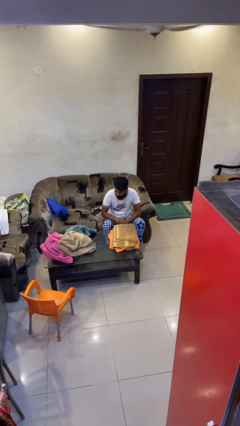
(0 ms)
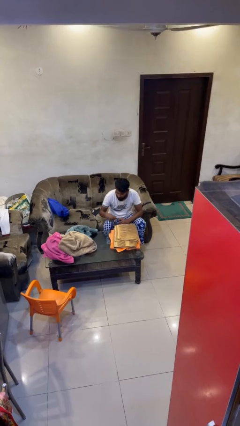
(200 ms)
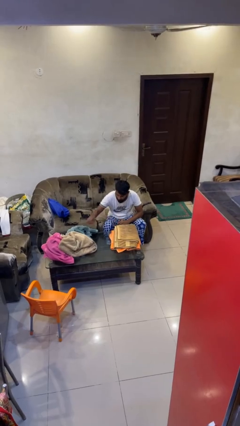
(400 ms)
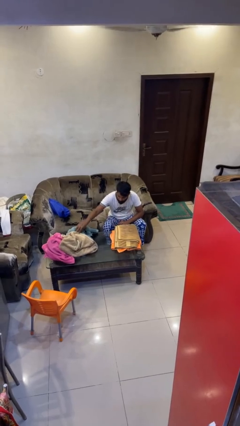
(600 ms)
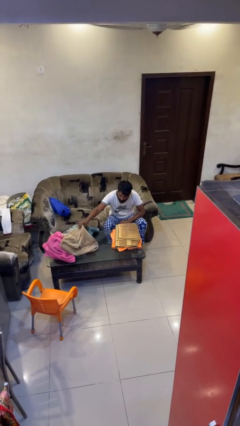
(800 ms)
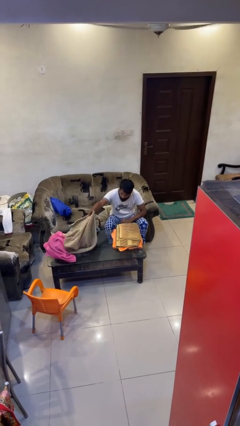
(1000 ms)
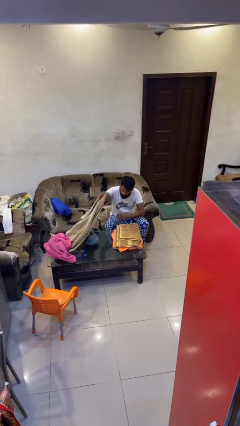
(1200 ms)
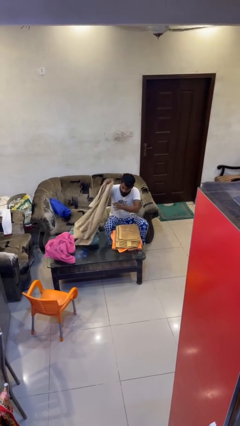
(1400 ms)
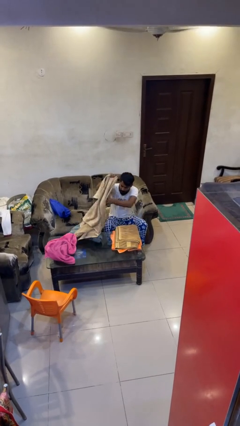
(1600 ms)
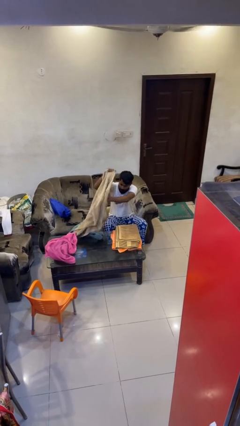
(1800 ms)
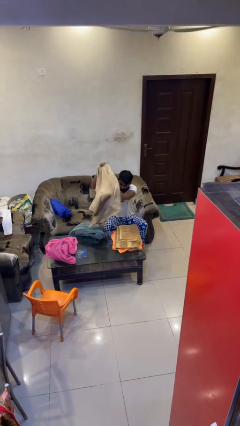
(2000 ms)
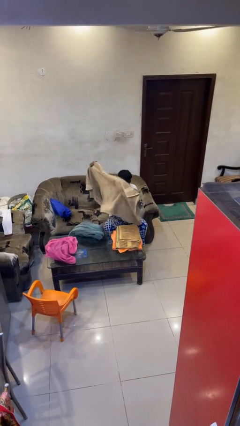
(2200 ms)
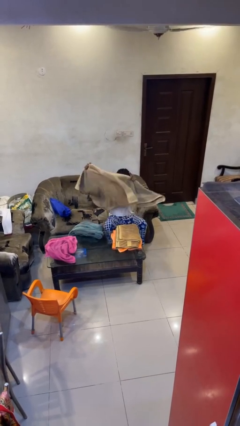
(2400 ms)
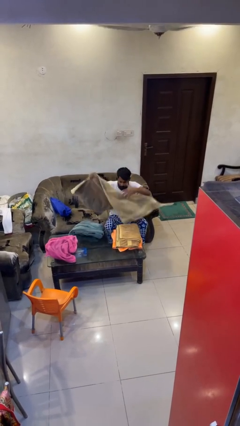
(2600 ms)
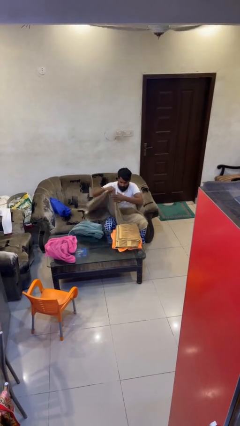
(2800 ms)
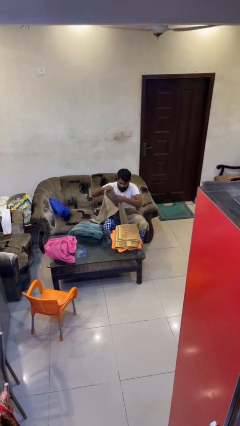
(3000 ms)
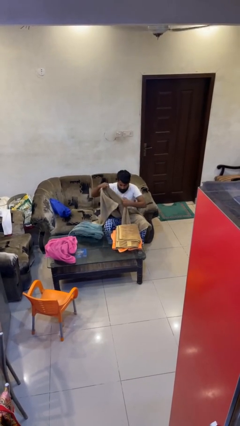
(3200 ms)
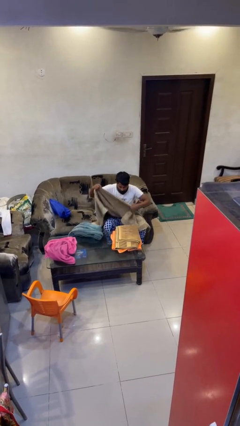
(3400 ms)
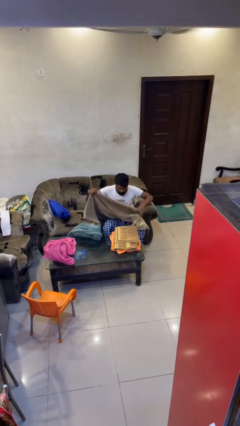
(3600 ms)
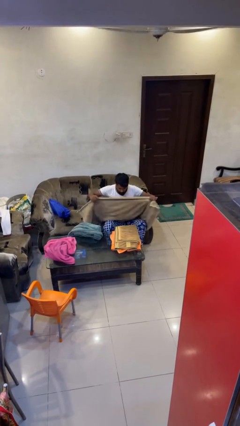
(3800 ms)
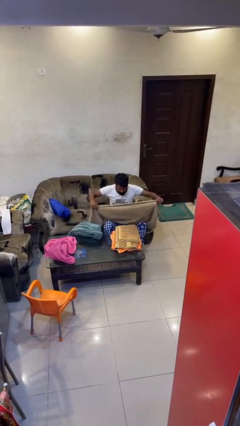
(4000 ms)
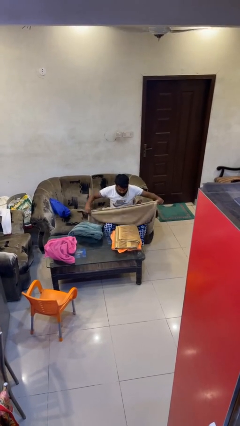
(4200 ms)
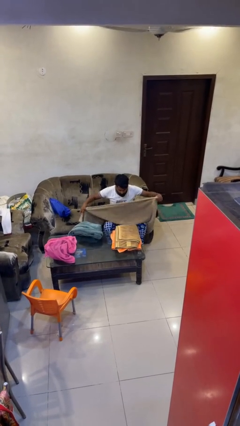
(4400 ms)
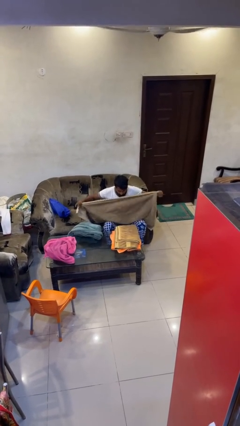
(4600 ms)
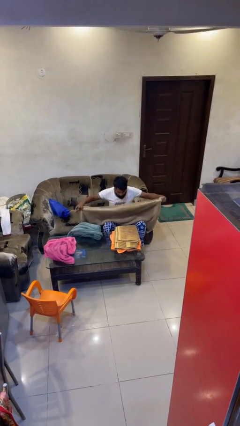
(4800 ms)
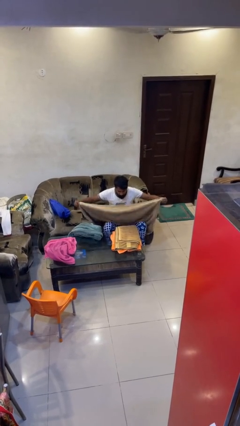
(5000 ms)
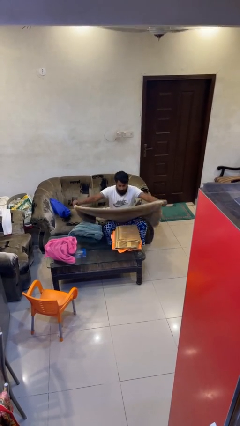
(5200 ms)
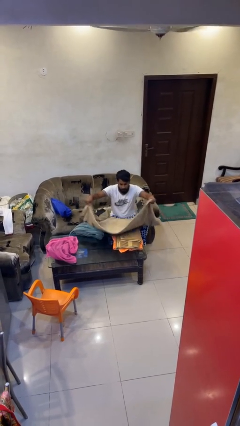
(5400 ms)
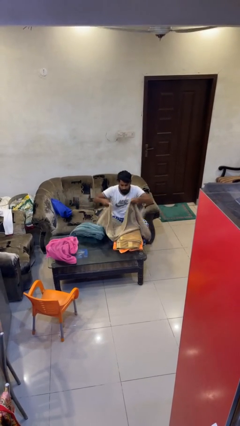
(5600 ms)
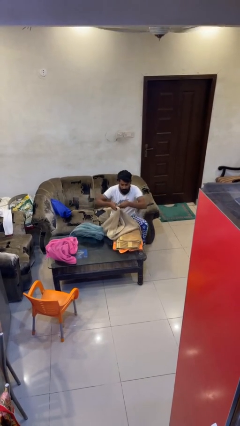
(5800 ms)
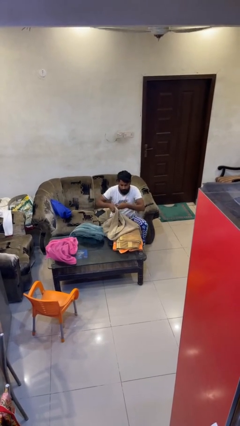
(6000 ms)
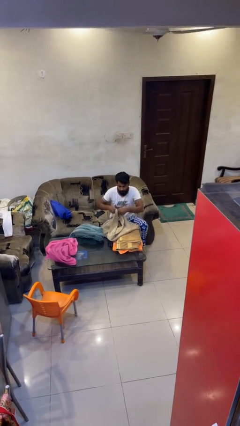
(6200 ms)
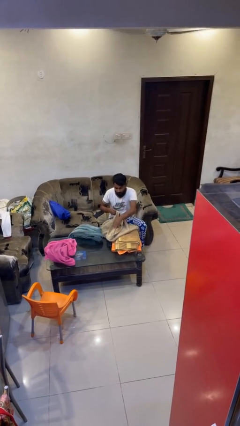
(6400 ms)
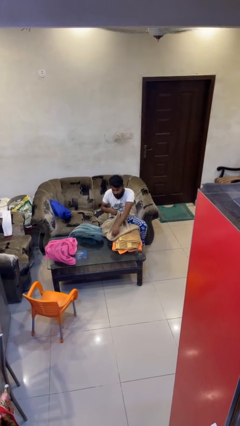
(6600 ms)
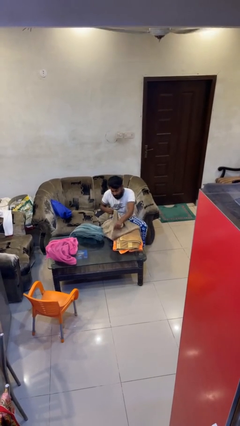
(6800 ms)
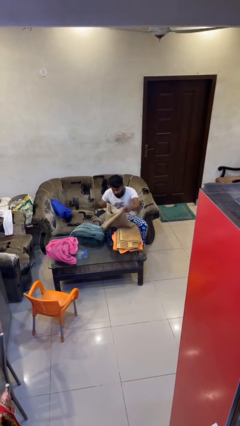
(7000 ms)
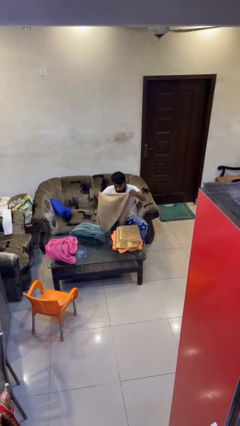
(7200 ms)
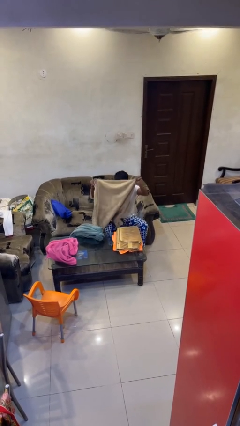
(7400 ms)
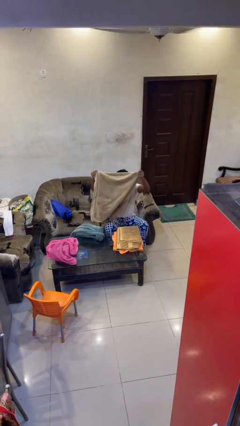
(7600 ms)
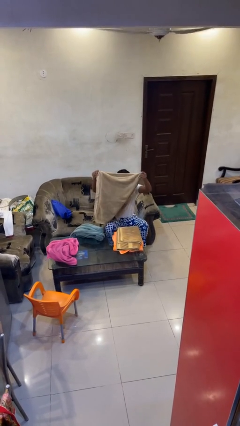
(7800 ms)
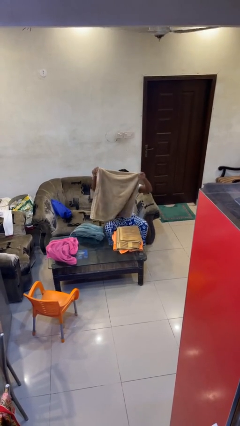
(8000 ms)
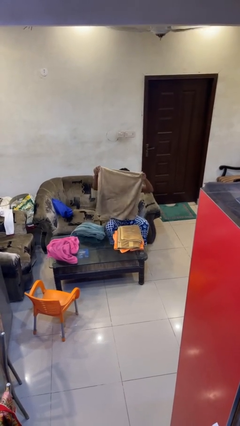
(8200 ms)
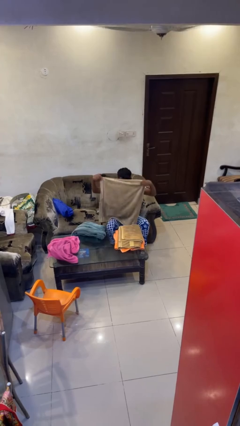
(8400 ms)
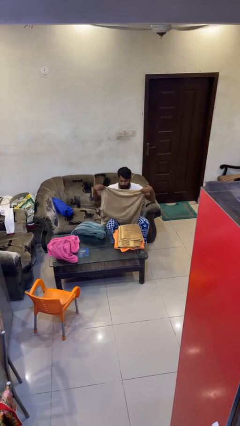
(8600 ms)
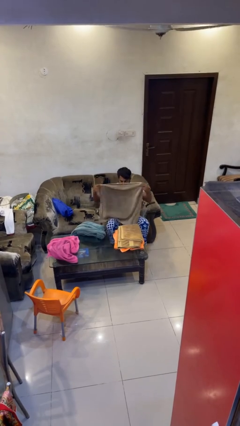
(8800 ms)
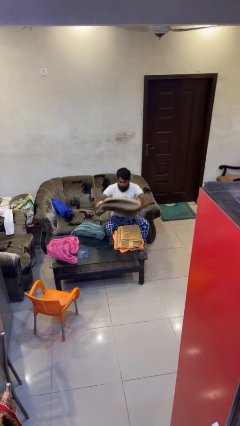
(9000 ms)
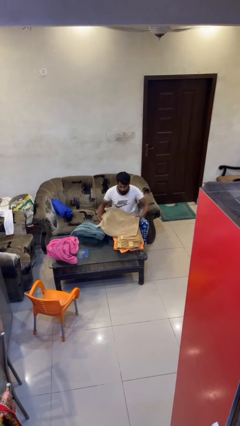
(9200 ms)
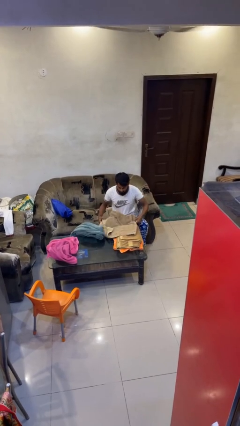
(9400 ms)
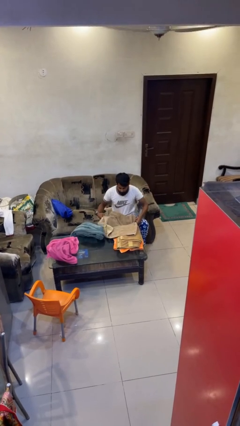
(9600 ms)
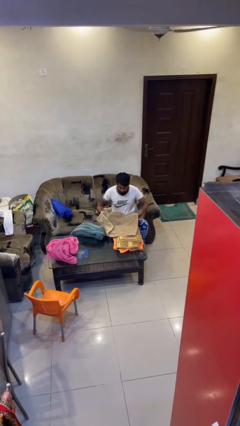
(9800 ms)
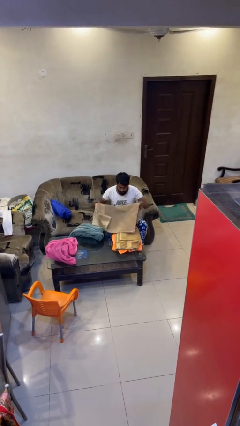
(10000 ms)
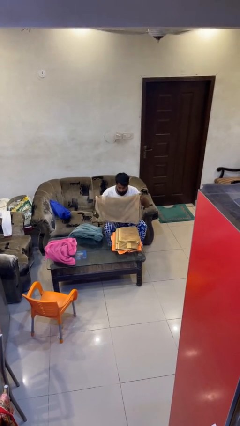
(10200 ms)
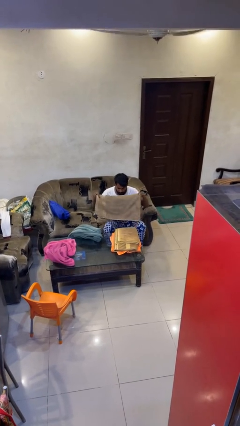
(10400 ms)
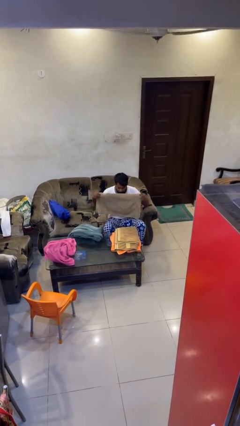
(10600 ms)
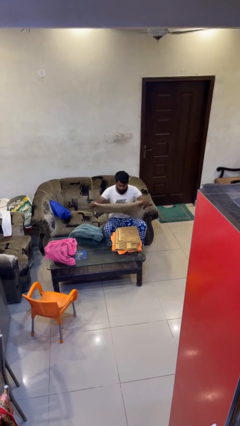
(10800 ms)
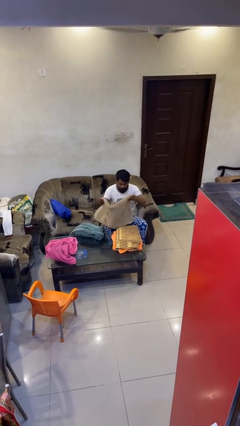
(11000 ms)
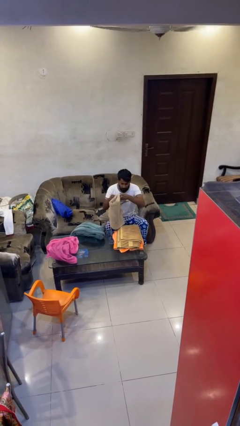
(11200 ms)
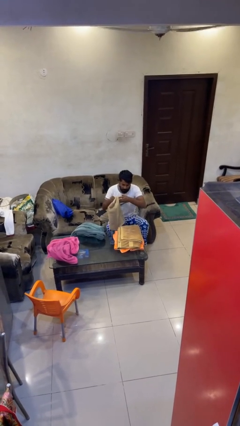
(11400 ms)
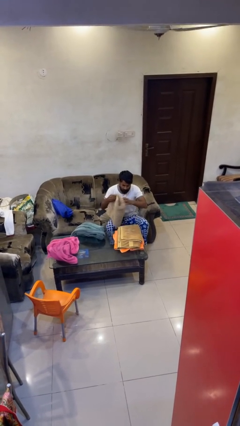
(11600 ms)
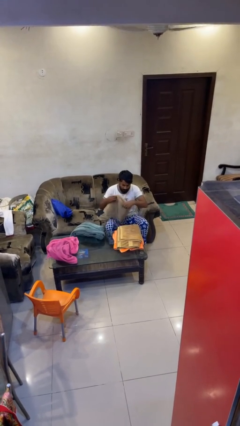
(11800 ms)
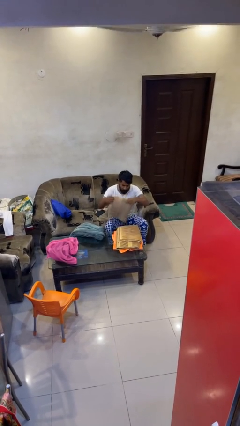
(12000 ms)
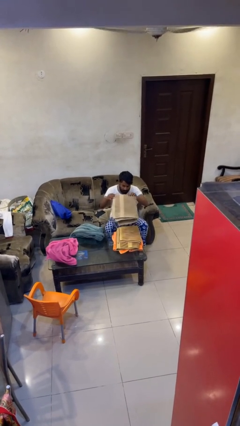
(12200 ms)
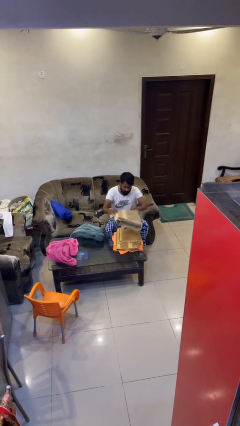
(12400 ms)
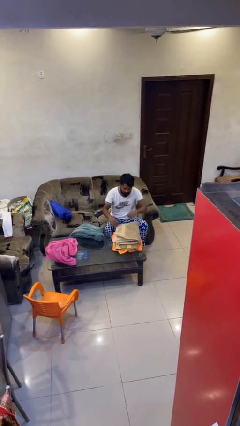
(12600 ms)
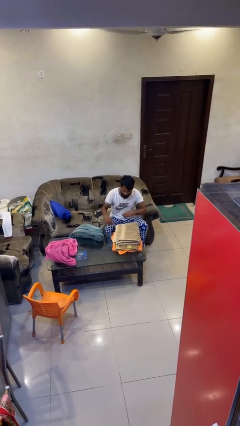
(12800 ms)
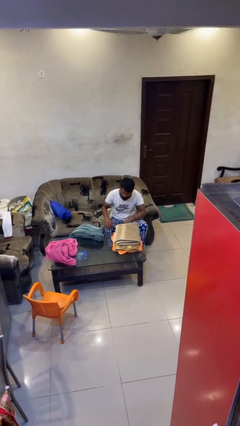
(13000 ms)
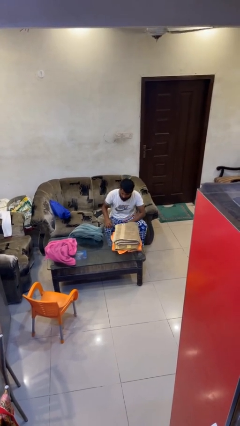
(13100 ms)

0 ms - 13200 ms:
person folds towel

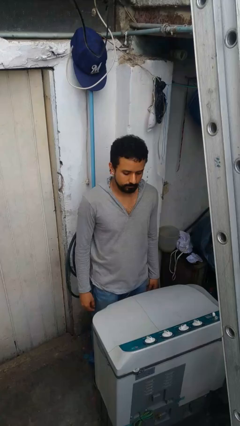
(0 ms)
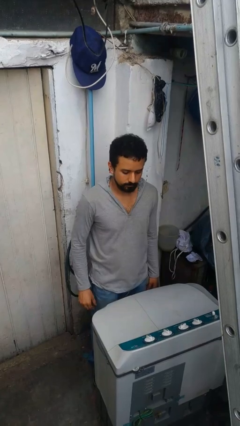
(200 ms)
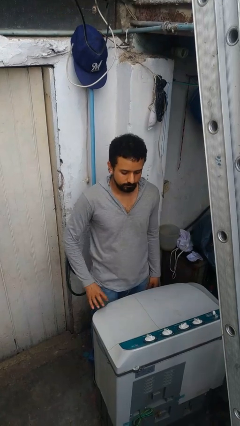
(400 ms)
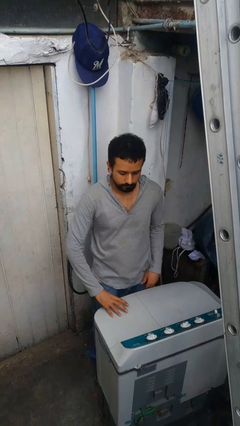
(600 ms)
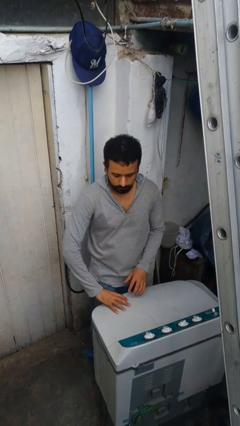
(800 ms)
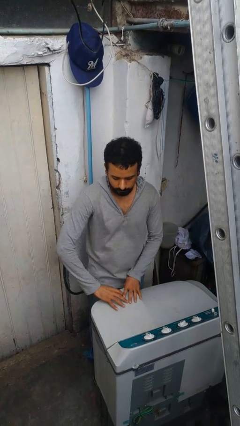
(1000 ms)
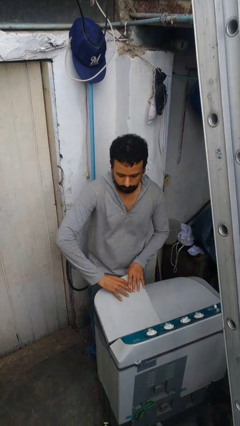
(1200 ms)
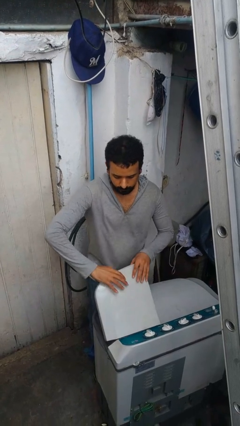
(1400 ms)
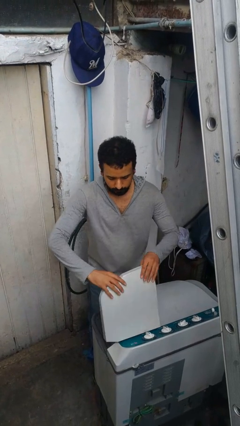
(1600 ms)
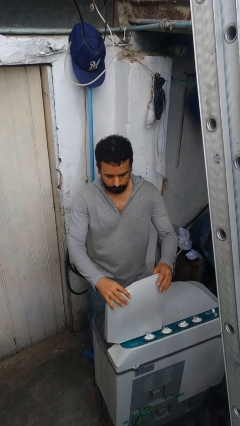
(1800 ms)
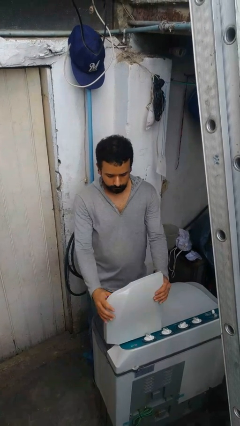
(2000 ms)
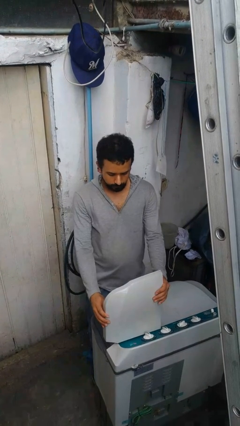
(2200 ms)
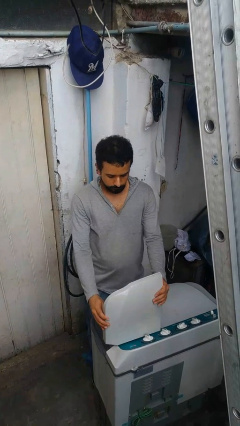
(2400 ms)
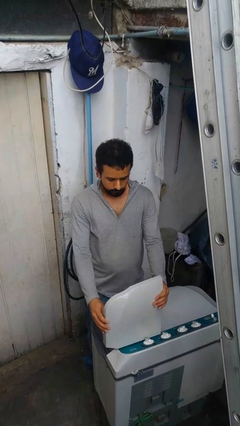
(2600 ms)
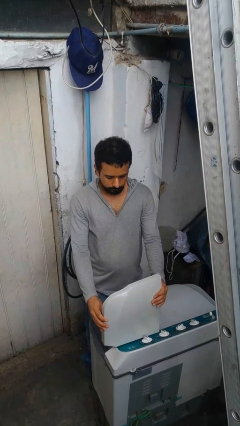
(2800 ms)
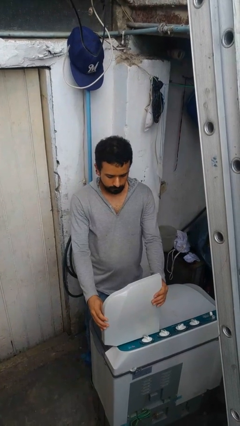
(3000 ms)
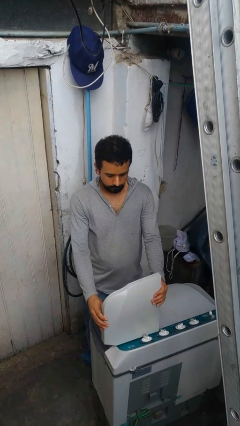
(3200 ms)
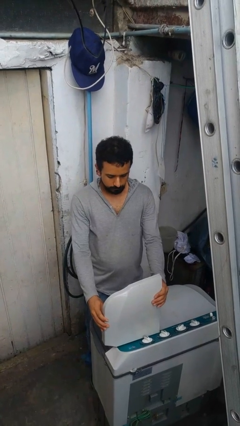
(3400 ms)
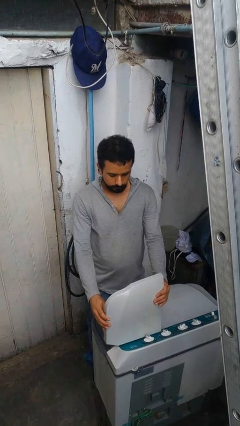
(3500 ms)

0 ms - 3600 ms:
person opens clothes washer

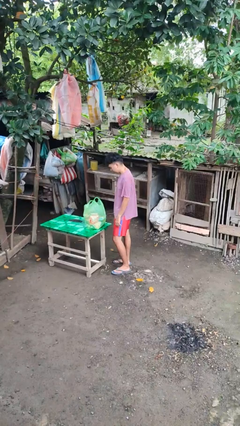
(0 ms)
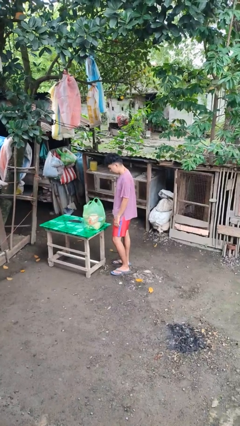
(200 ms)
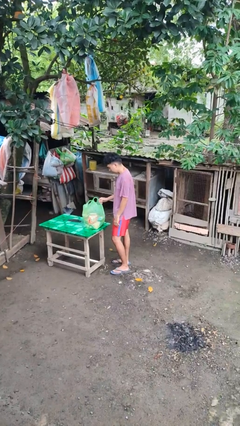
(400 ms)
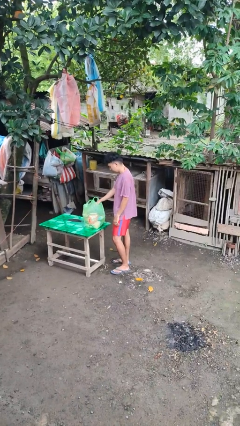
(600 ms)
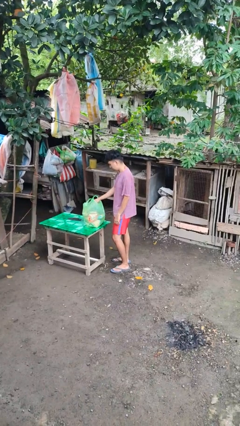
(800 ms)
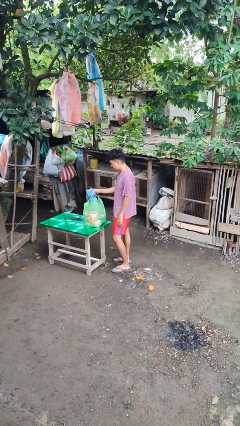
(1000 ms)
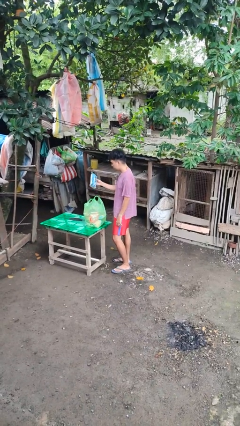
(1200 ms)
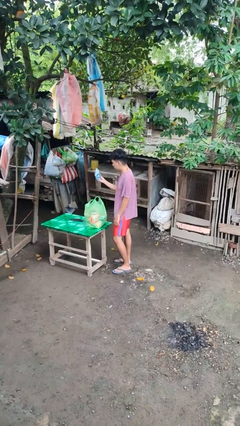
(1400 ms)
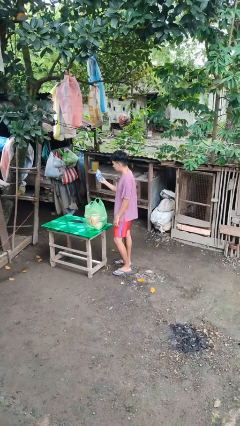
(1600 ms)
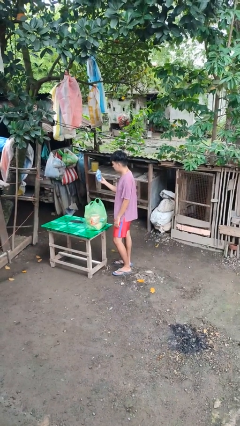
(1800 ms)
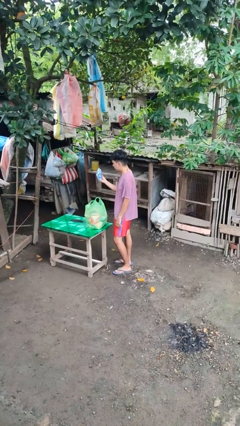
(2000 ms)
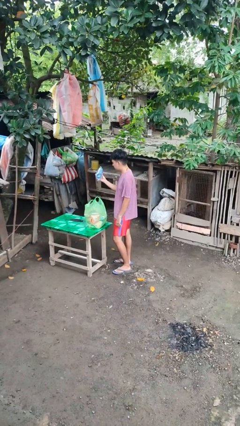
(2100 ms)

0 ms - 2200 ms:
person takes object from bag
